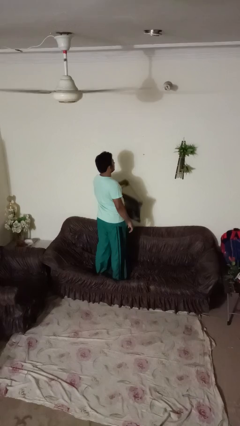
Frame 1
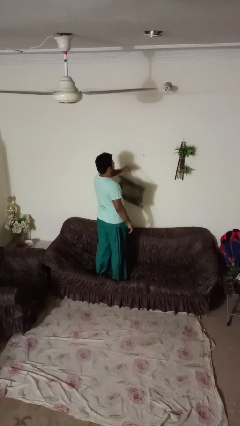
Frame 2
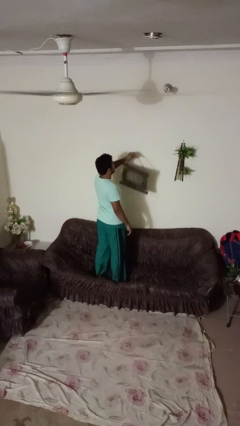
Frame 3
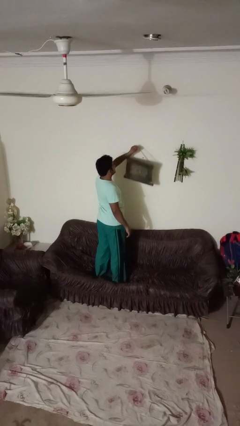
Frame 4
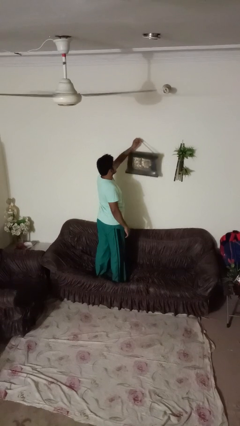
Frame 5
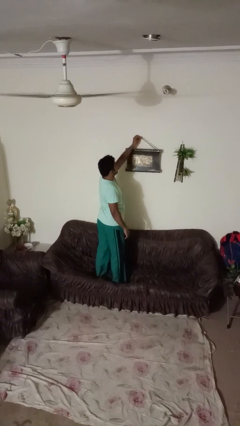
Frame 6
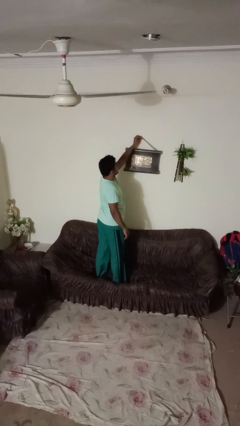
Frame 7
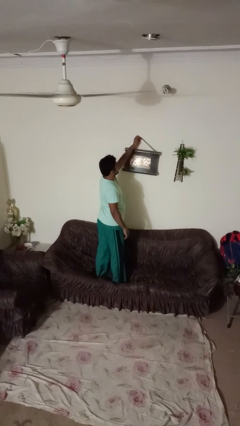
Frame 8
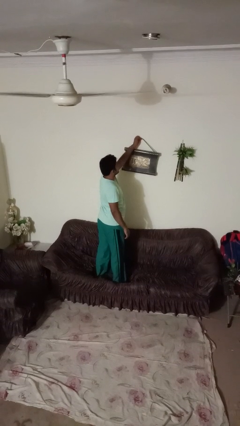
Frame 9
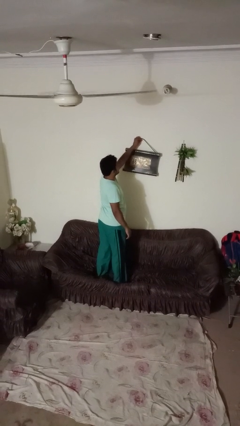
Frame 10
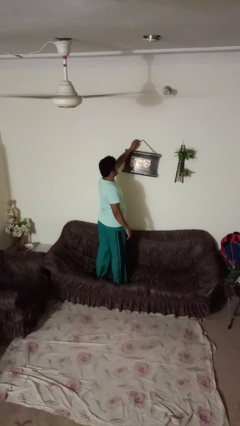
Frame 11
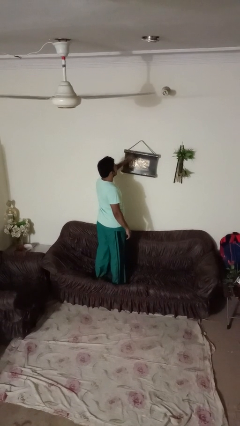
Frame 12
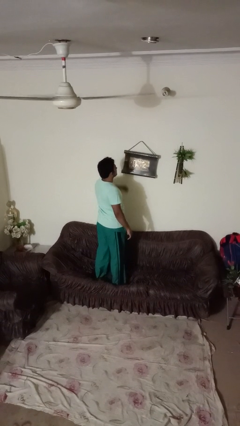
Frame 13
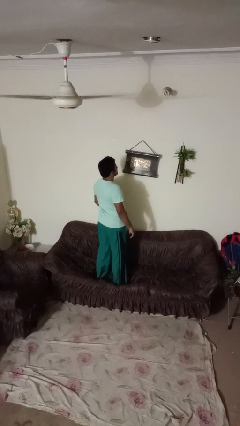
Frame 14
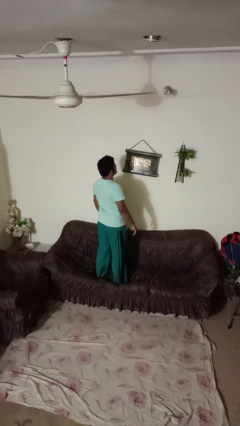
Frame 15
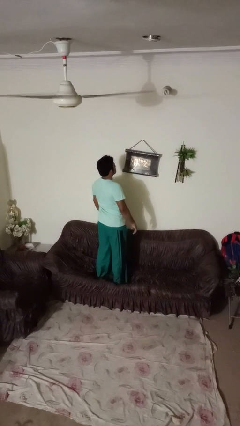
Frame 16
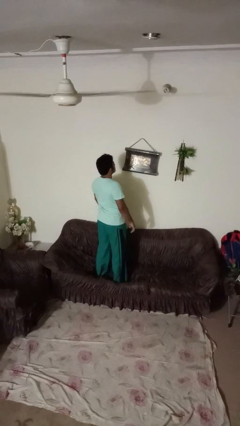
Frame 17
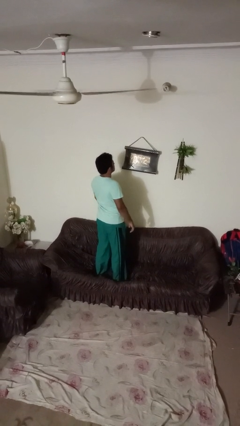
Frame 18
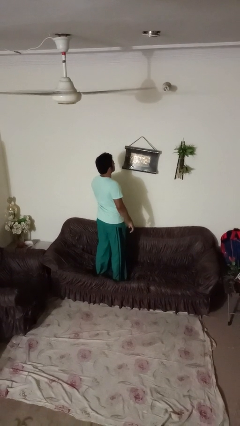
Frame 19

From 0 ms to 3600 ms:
person puts up picture frame

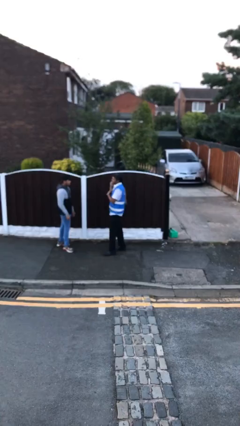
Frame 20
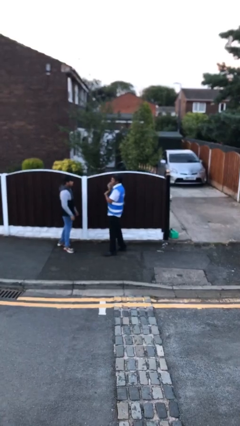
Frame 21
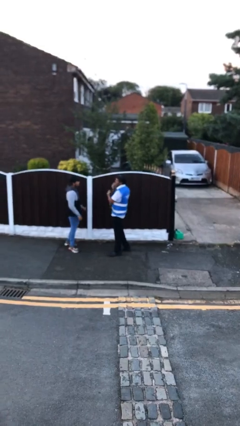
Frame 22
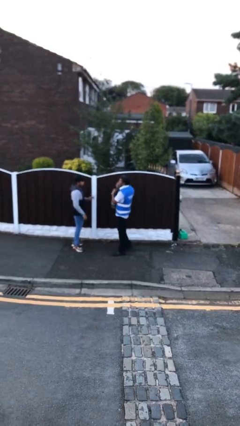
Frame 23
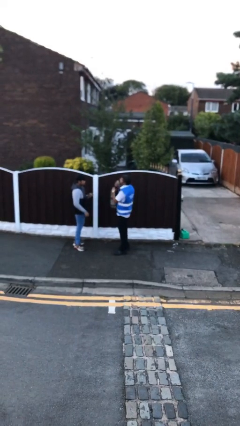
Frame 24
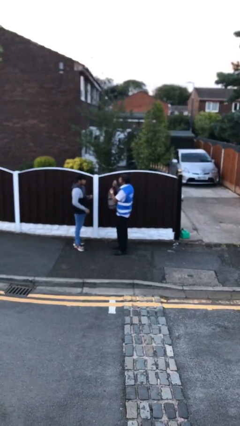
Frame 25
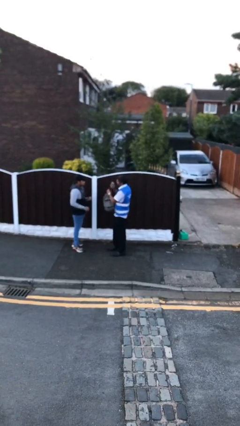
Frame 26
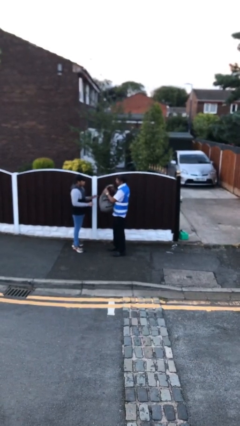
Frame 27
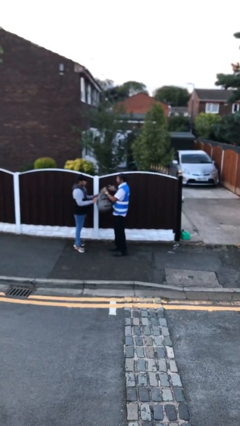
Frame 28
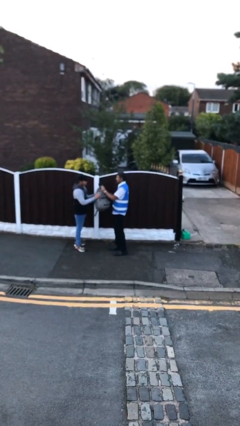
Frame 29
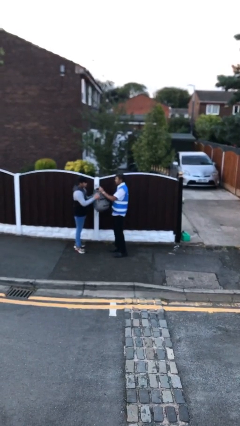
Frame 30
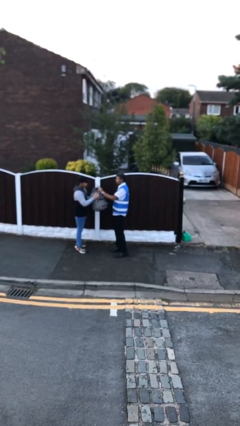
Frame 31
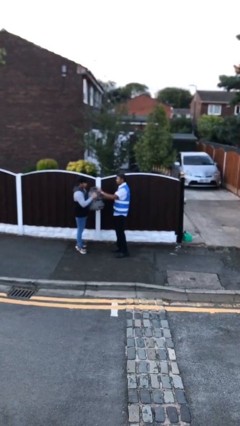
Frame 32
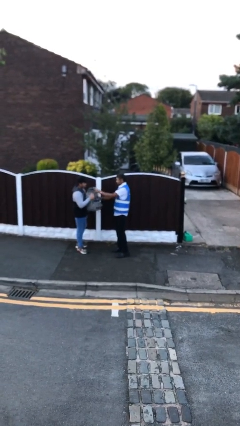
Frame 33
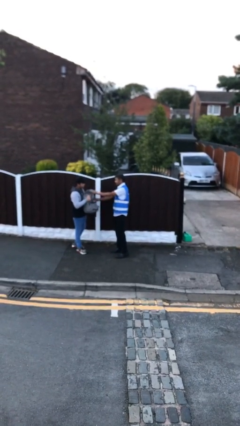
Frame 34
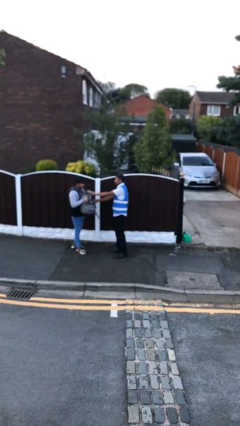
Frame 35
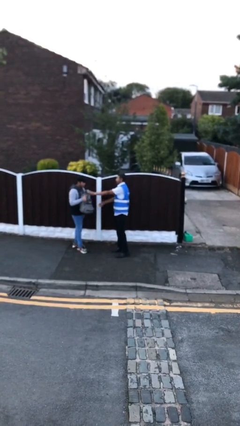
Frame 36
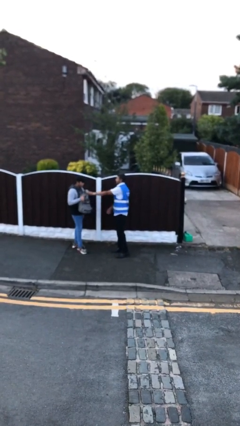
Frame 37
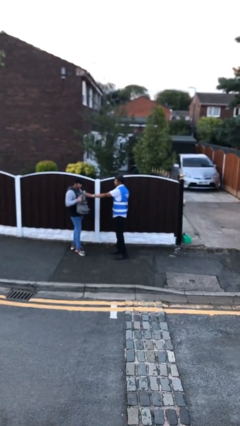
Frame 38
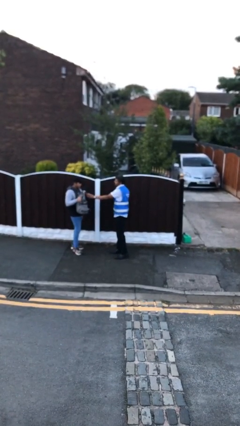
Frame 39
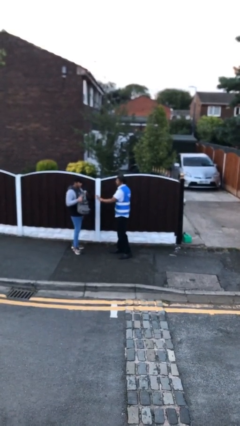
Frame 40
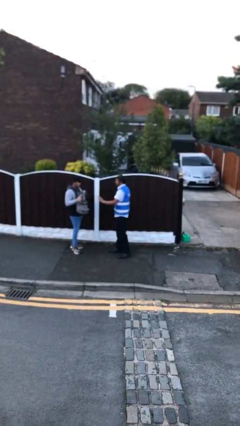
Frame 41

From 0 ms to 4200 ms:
person transfers object to person

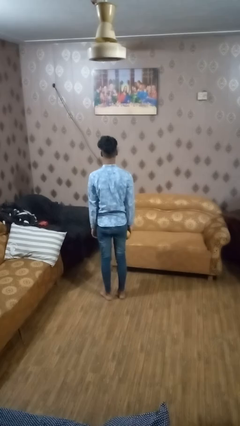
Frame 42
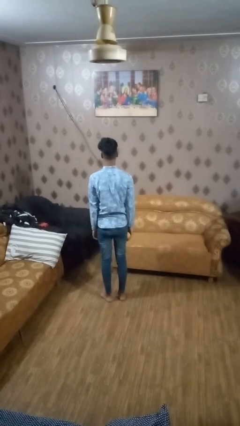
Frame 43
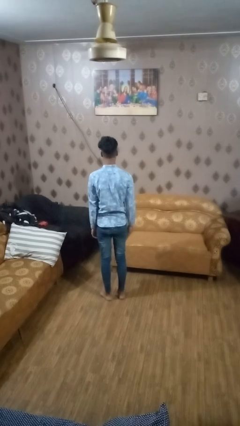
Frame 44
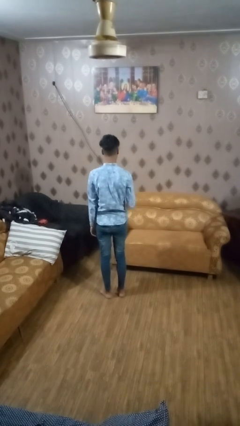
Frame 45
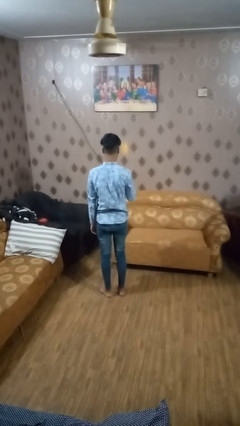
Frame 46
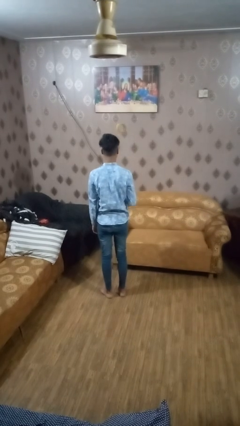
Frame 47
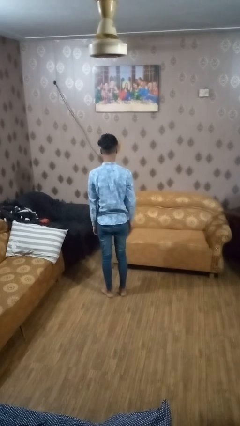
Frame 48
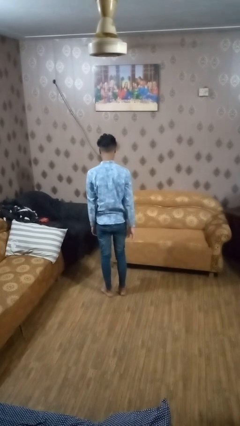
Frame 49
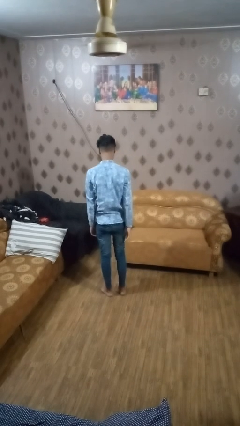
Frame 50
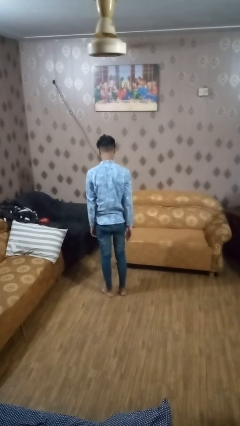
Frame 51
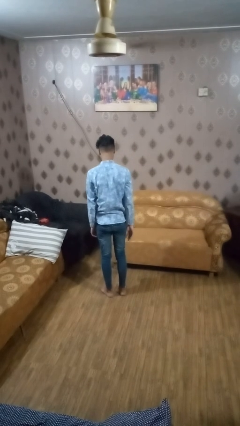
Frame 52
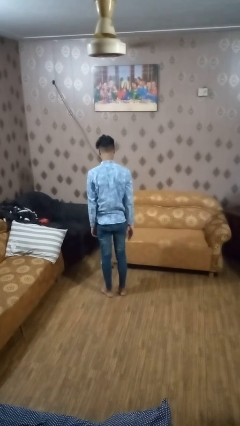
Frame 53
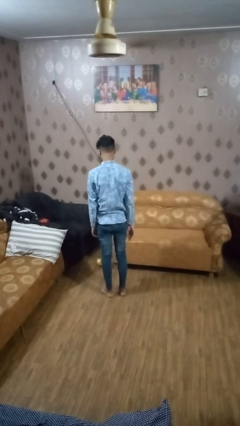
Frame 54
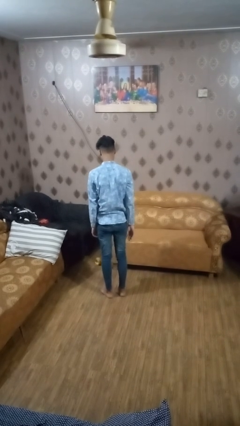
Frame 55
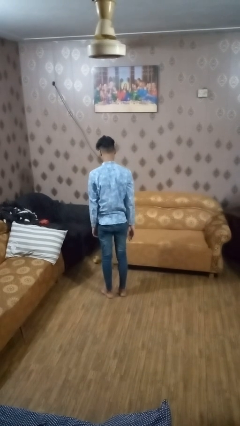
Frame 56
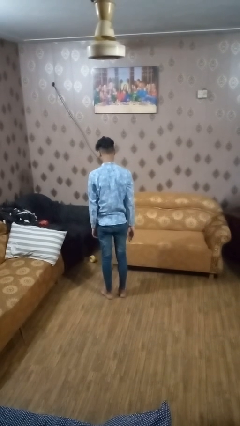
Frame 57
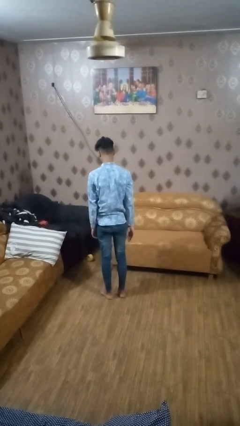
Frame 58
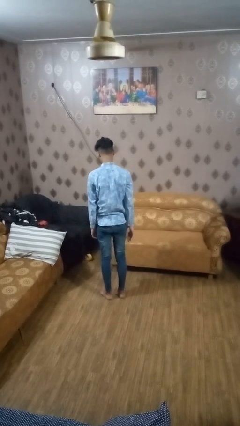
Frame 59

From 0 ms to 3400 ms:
person throws object into air

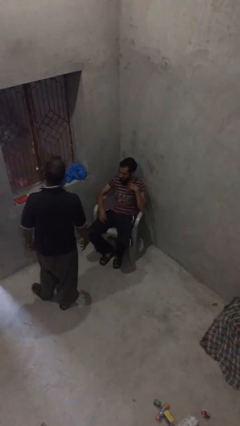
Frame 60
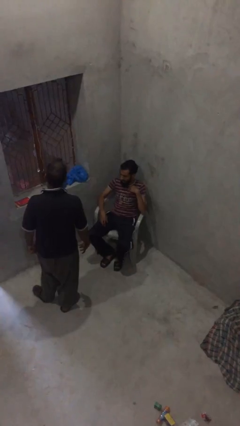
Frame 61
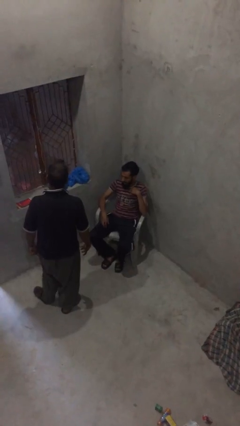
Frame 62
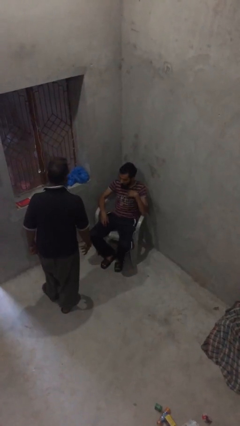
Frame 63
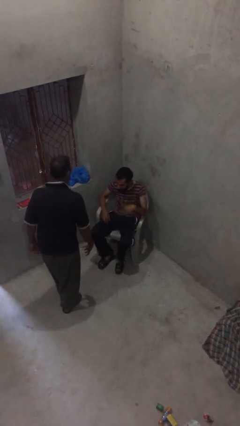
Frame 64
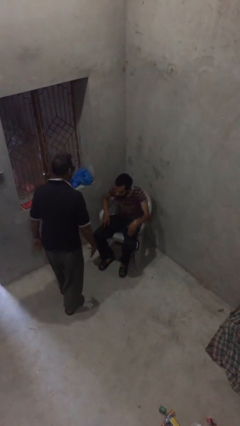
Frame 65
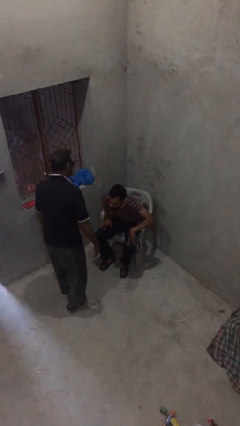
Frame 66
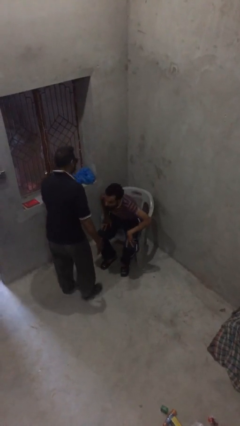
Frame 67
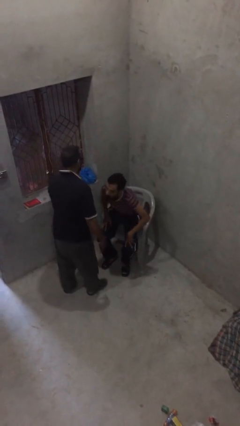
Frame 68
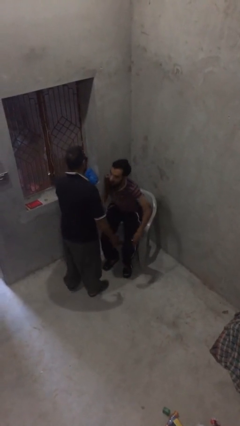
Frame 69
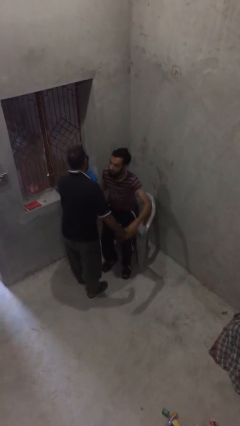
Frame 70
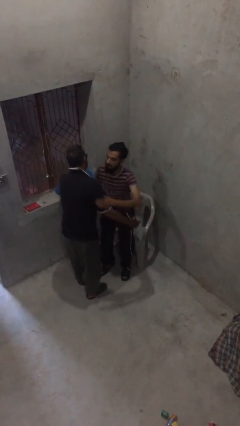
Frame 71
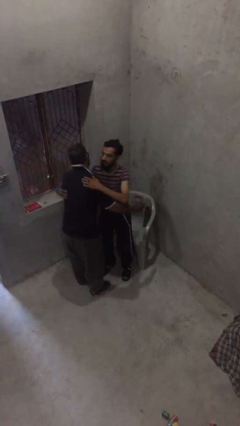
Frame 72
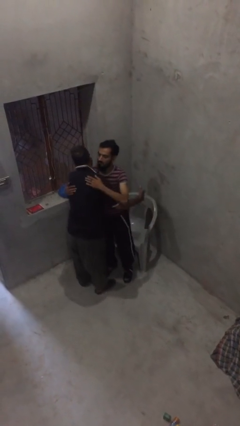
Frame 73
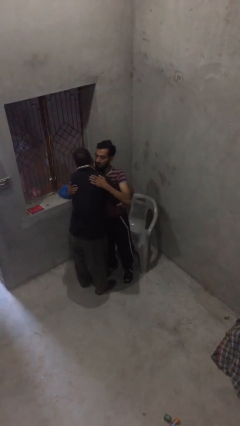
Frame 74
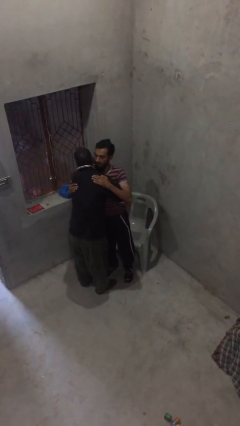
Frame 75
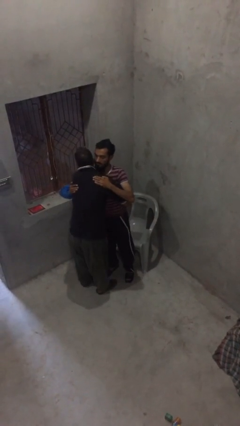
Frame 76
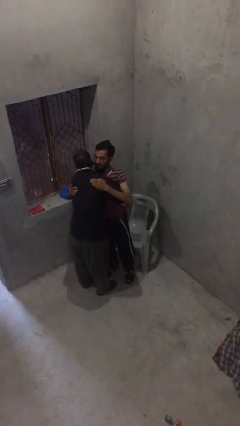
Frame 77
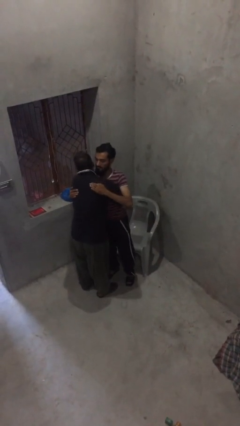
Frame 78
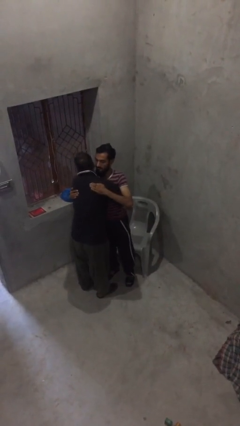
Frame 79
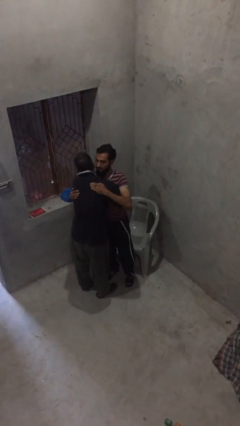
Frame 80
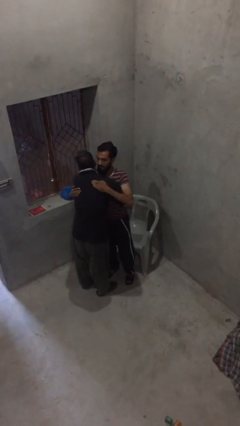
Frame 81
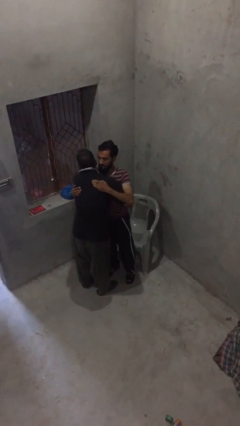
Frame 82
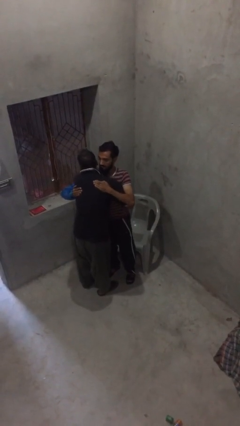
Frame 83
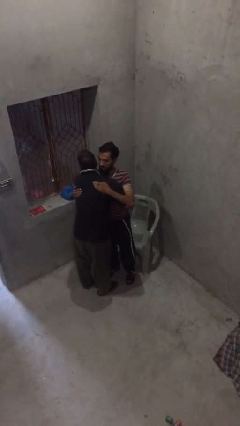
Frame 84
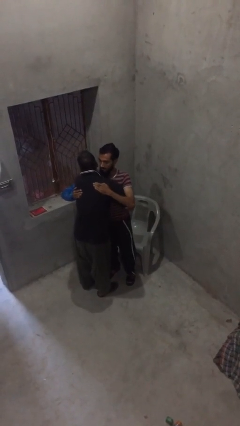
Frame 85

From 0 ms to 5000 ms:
person embraces person

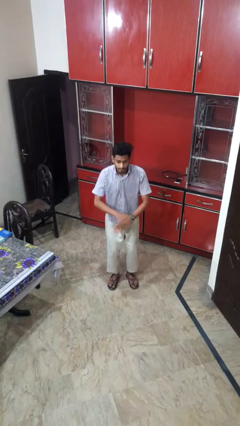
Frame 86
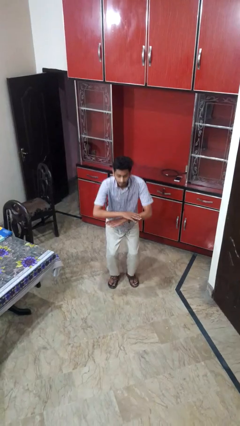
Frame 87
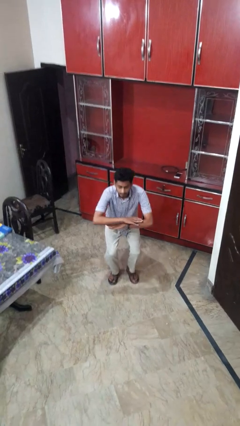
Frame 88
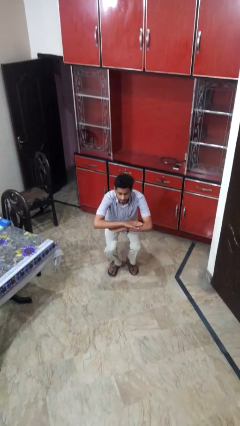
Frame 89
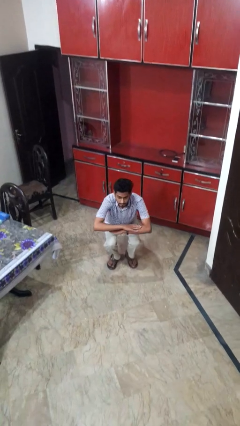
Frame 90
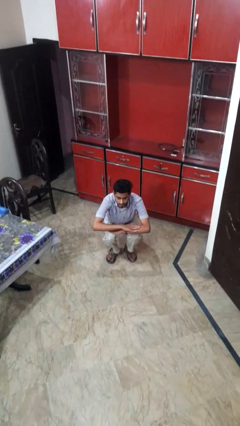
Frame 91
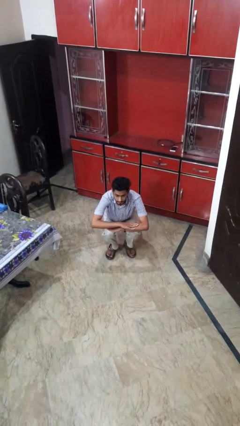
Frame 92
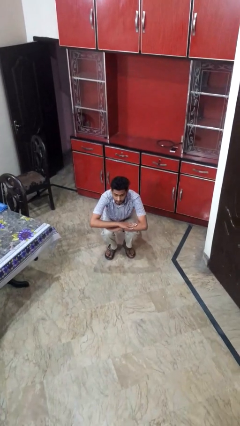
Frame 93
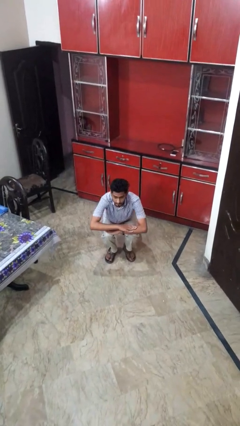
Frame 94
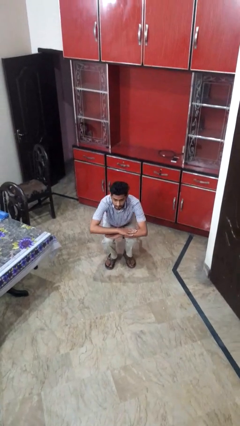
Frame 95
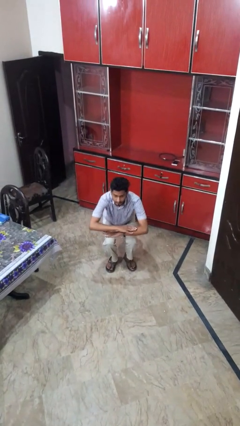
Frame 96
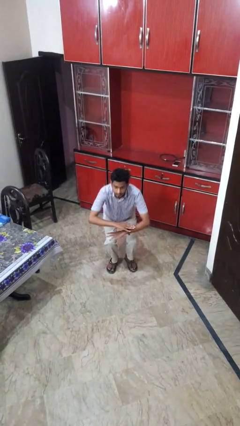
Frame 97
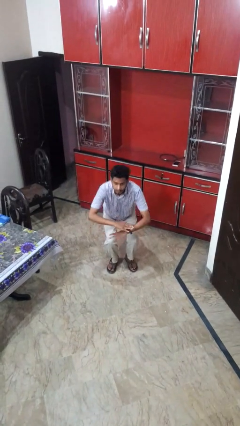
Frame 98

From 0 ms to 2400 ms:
person squats
